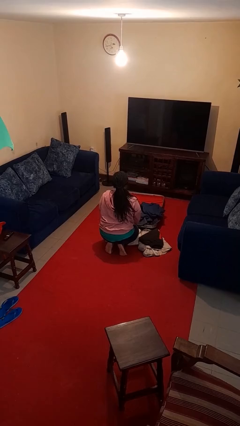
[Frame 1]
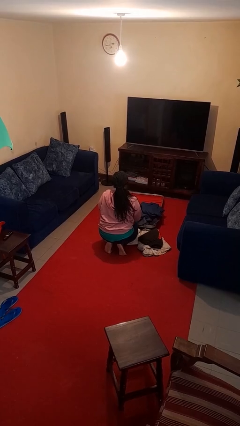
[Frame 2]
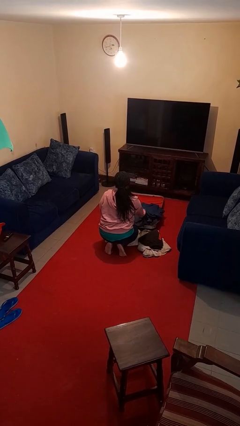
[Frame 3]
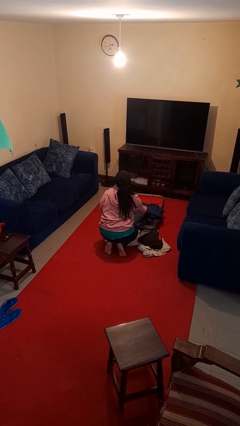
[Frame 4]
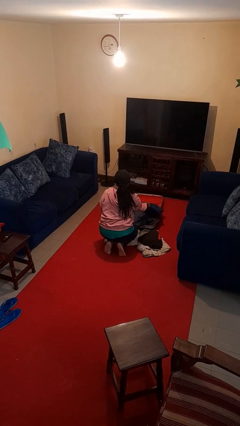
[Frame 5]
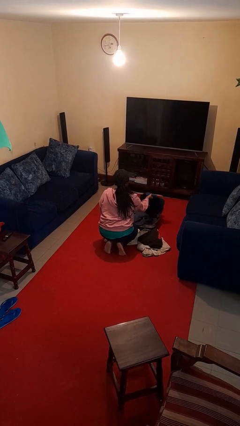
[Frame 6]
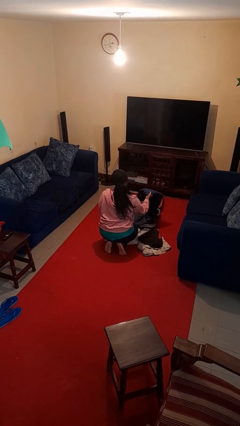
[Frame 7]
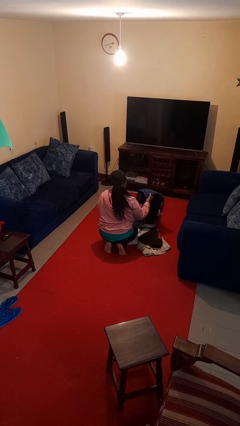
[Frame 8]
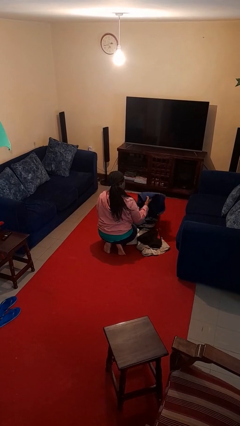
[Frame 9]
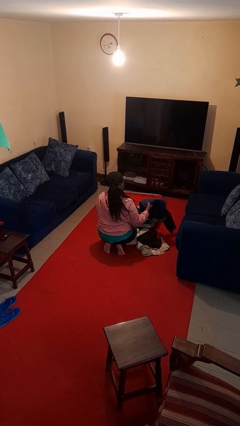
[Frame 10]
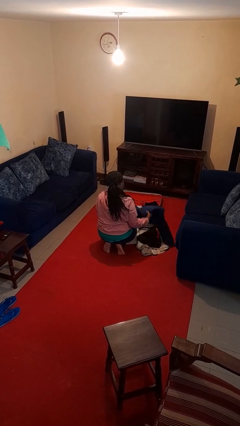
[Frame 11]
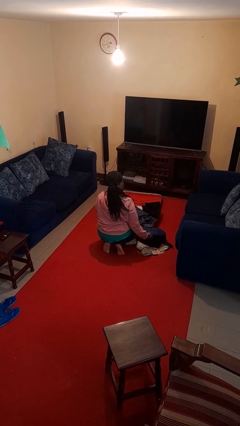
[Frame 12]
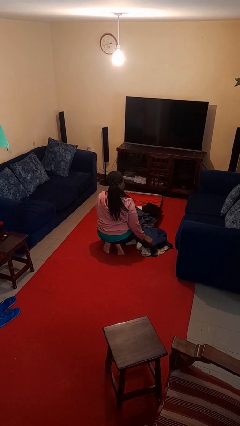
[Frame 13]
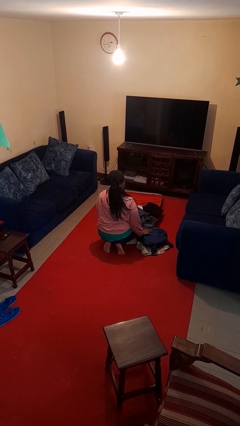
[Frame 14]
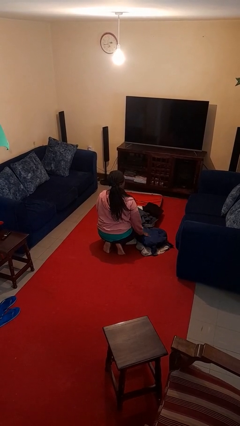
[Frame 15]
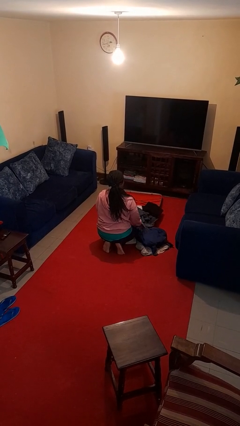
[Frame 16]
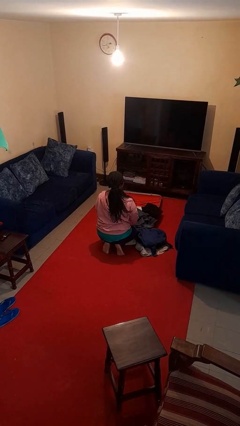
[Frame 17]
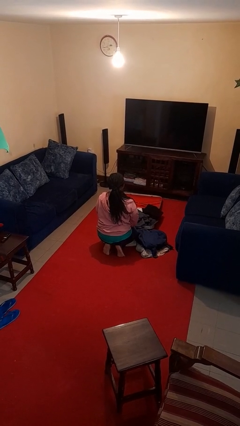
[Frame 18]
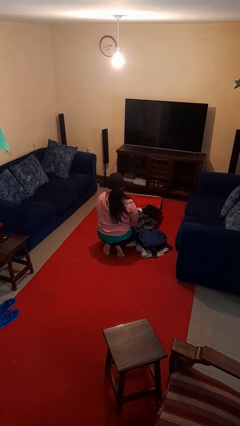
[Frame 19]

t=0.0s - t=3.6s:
person unloads clothes from suitcase

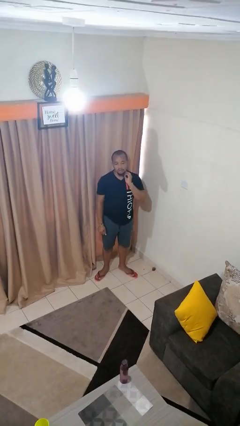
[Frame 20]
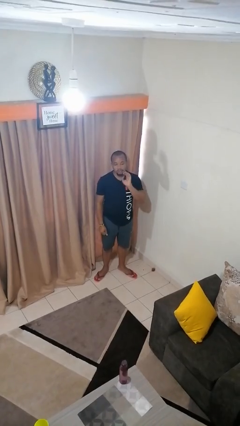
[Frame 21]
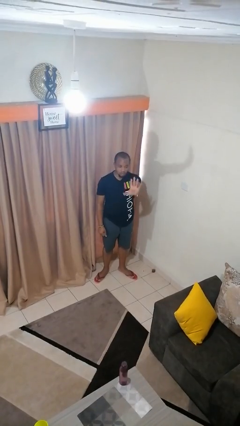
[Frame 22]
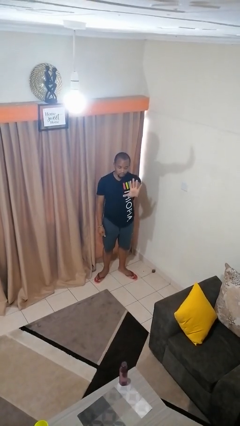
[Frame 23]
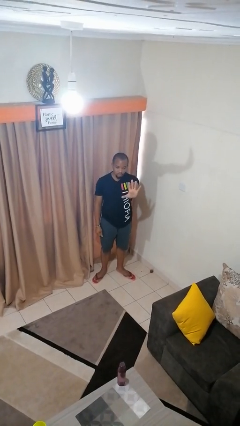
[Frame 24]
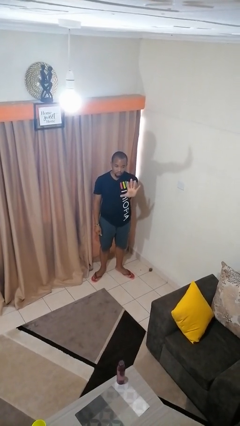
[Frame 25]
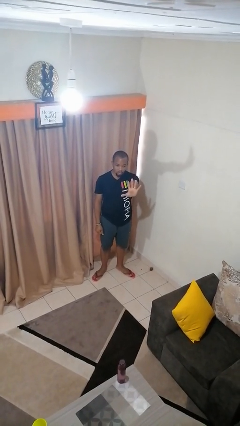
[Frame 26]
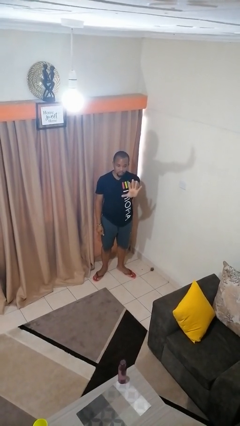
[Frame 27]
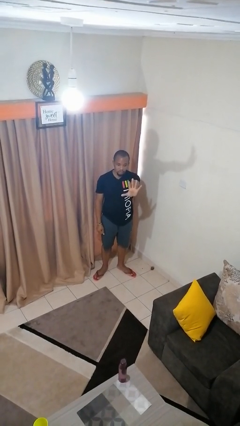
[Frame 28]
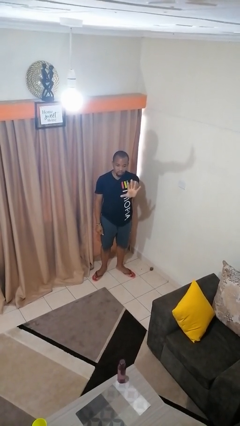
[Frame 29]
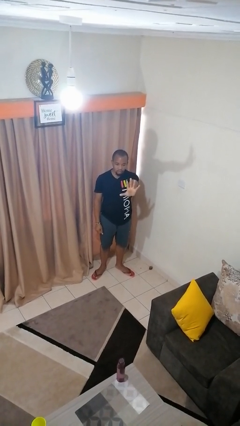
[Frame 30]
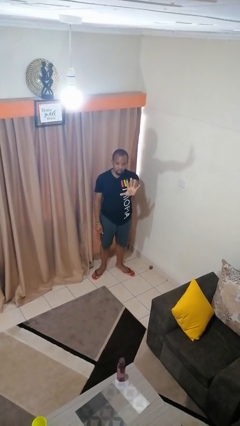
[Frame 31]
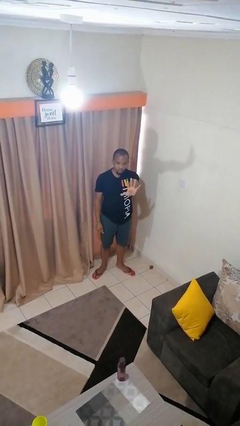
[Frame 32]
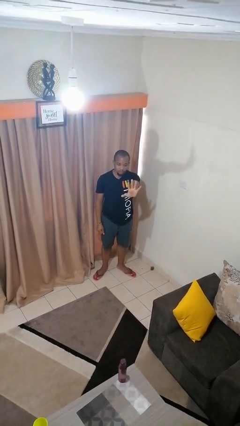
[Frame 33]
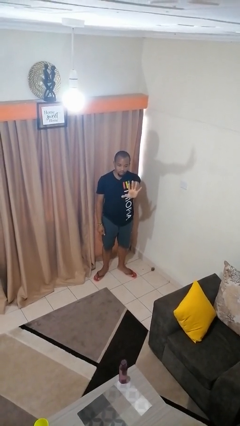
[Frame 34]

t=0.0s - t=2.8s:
person gestures number five

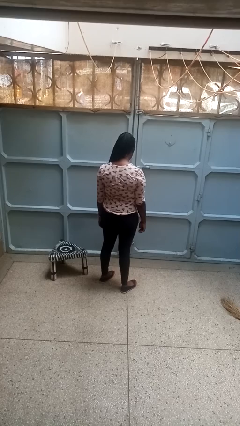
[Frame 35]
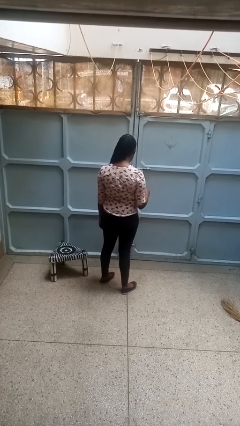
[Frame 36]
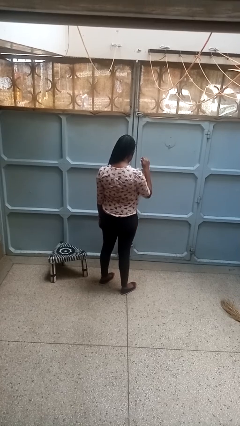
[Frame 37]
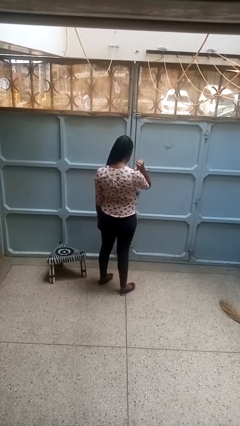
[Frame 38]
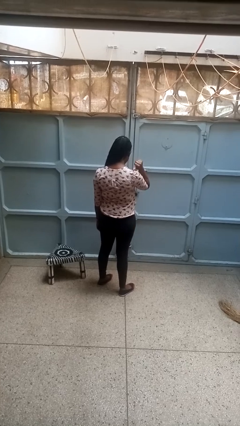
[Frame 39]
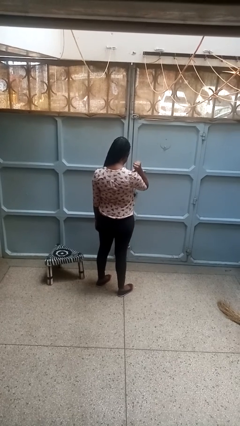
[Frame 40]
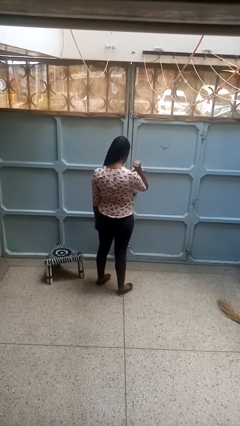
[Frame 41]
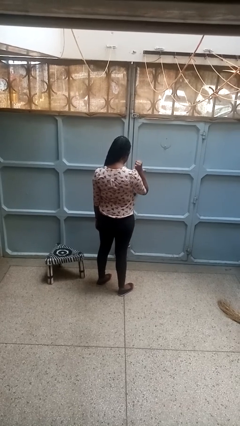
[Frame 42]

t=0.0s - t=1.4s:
person gestures behind me

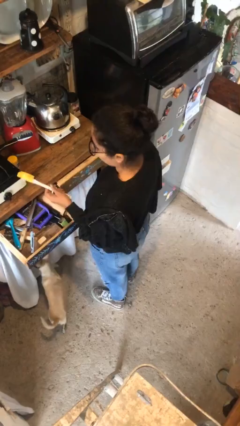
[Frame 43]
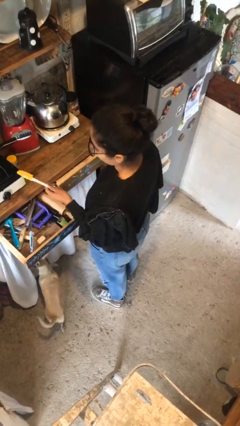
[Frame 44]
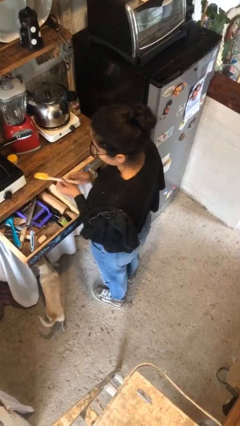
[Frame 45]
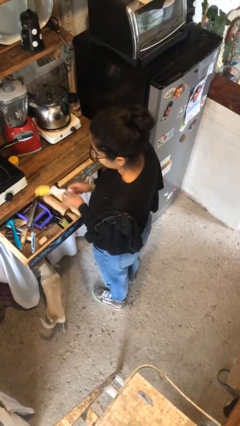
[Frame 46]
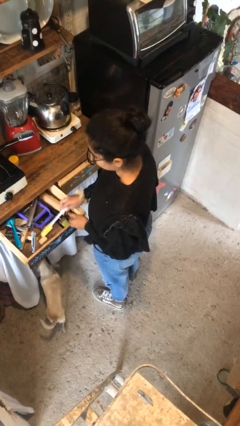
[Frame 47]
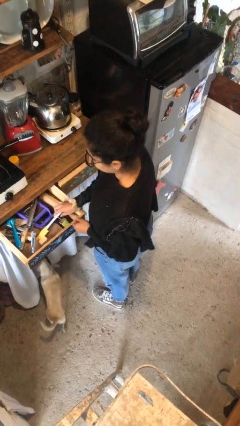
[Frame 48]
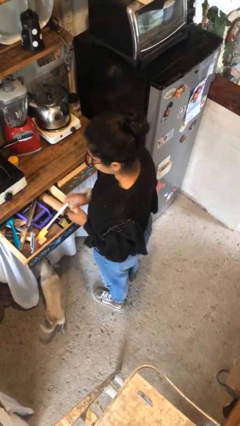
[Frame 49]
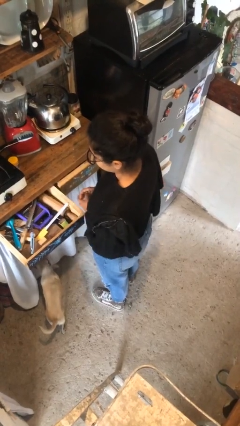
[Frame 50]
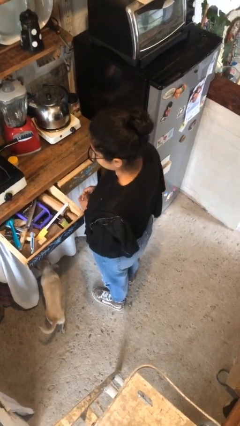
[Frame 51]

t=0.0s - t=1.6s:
person puts object into kitchen drawer

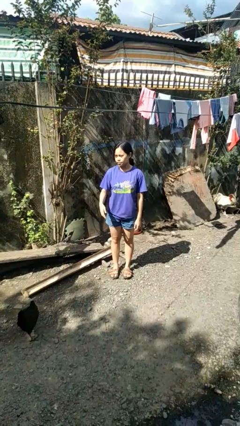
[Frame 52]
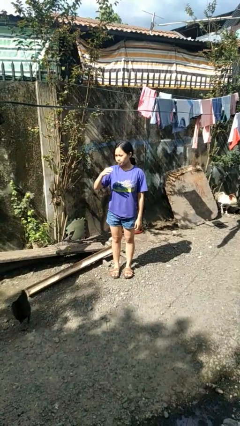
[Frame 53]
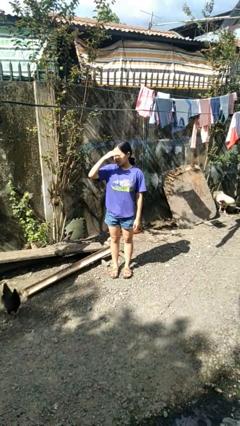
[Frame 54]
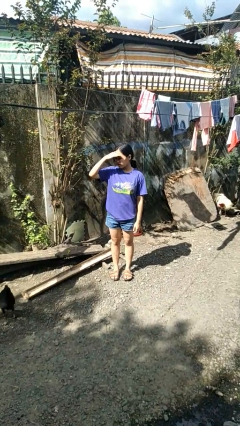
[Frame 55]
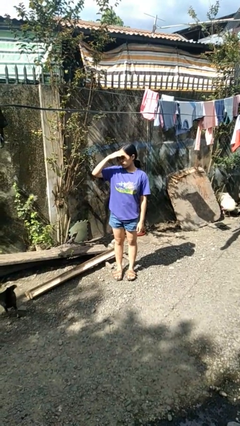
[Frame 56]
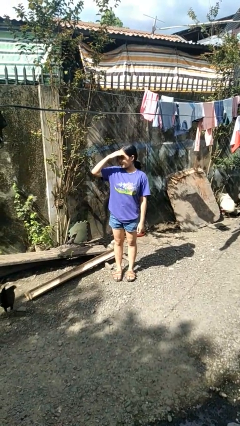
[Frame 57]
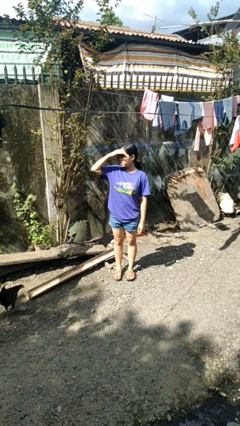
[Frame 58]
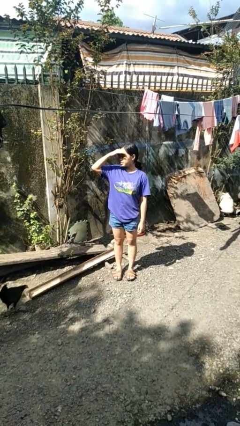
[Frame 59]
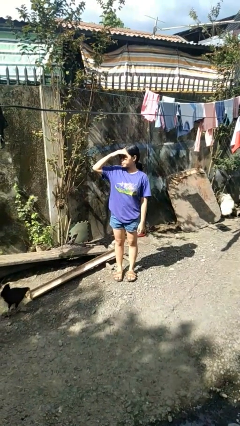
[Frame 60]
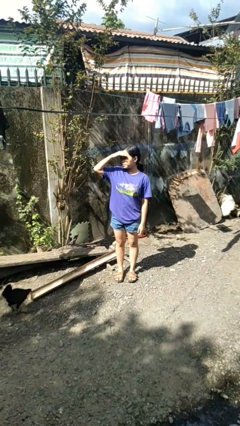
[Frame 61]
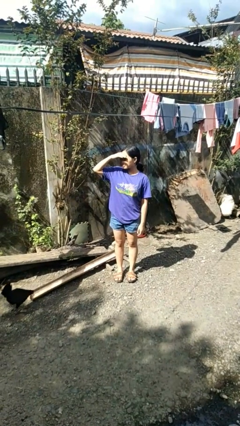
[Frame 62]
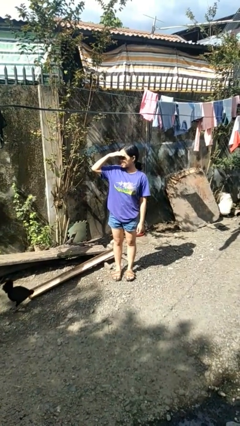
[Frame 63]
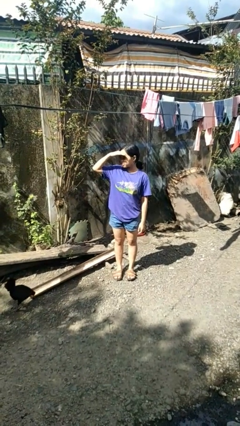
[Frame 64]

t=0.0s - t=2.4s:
person shades eyes

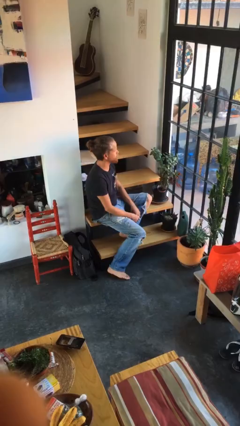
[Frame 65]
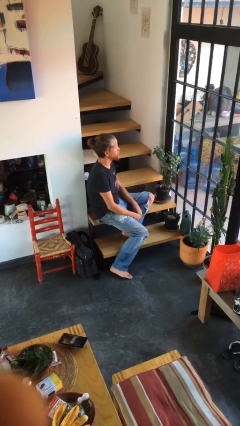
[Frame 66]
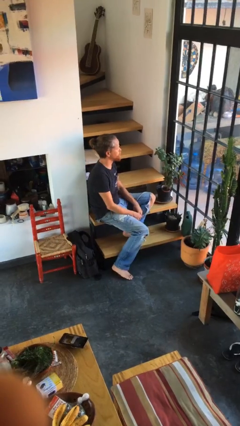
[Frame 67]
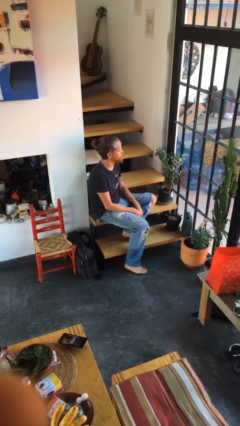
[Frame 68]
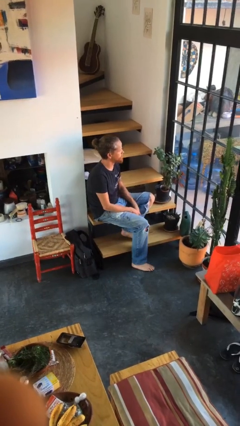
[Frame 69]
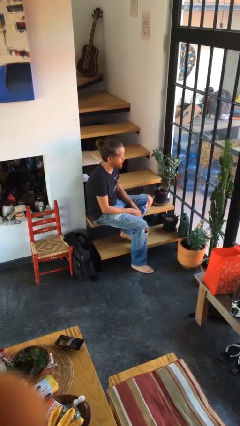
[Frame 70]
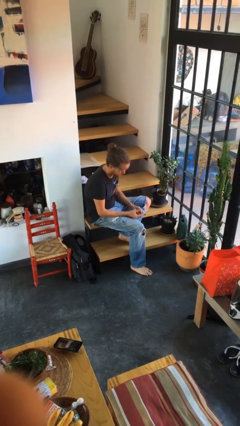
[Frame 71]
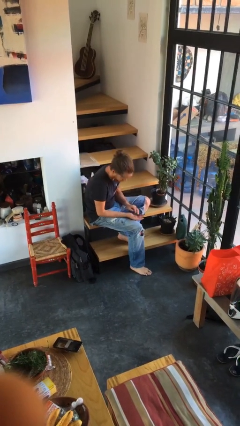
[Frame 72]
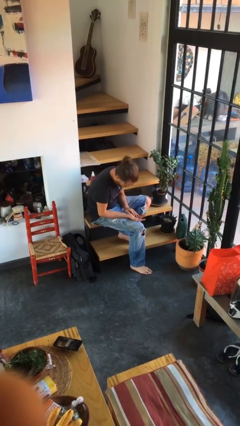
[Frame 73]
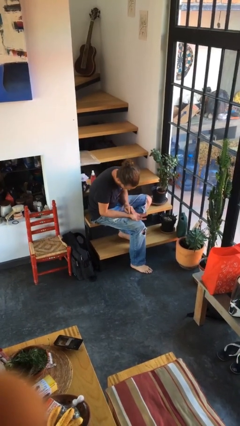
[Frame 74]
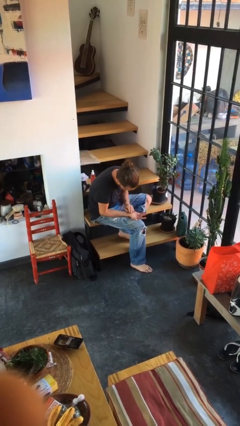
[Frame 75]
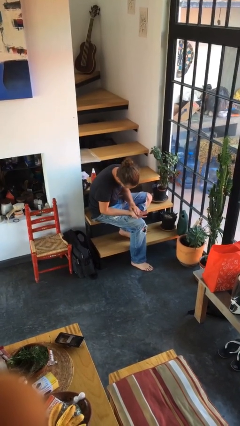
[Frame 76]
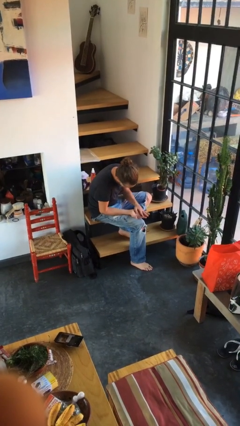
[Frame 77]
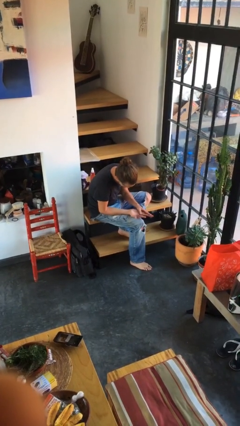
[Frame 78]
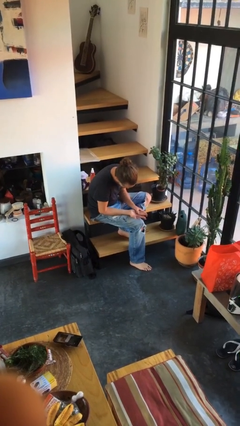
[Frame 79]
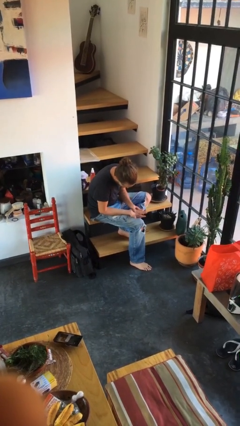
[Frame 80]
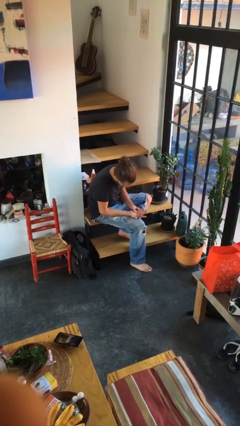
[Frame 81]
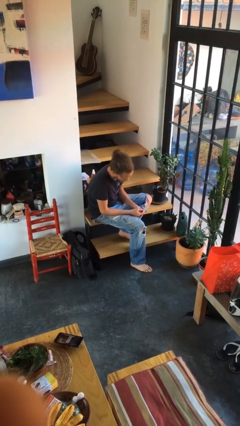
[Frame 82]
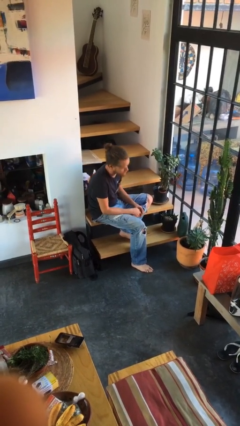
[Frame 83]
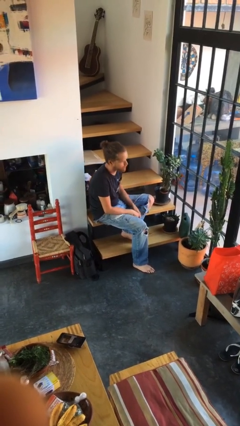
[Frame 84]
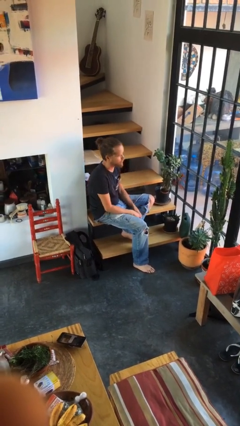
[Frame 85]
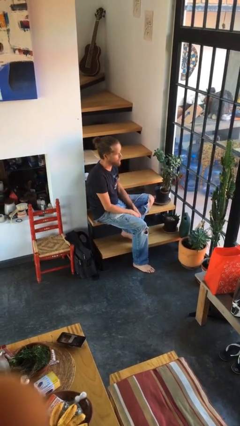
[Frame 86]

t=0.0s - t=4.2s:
person looks at hands in lap

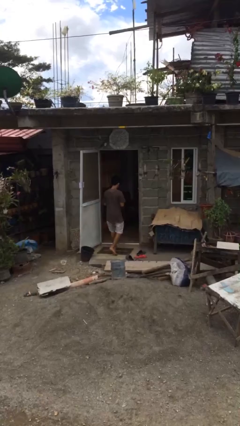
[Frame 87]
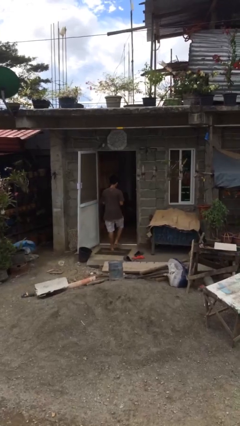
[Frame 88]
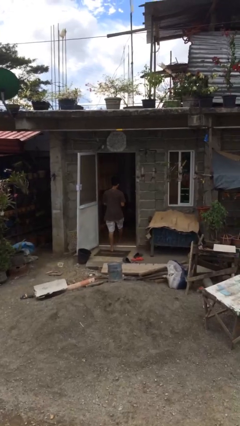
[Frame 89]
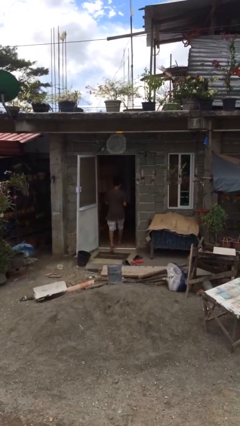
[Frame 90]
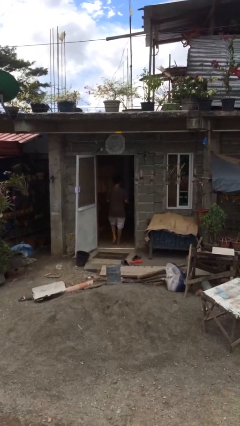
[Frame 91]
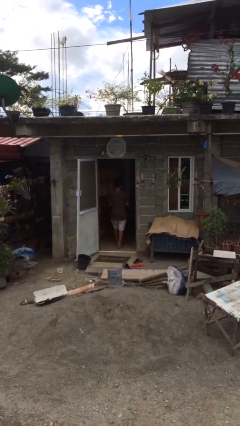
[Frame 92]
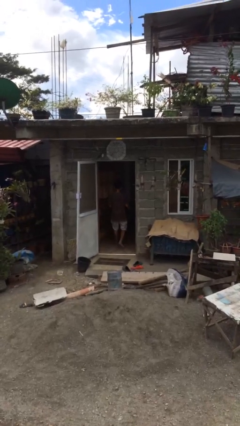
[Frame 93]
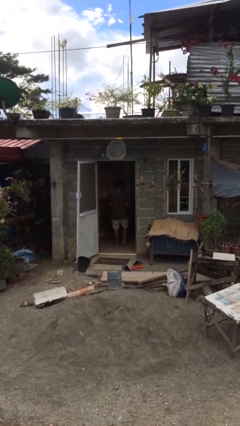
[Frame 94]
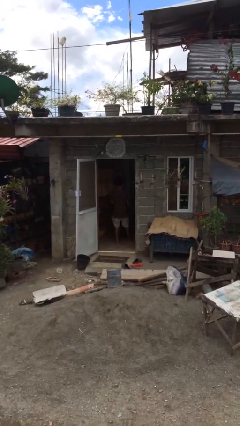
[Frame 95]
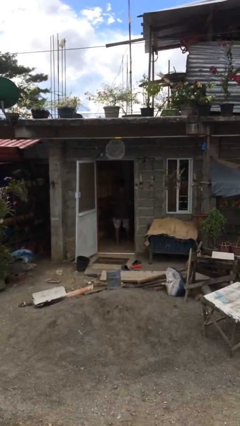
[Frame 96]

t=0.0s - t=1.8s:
person exits scene through structure
